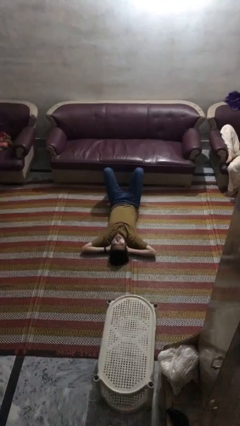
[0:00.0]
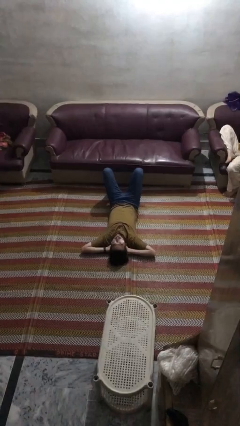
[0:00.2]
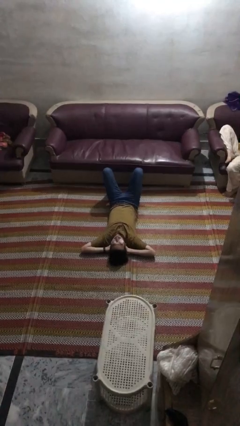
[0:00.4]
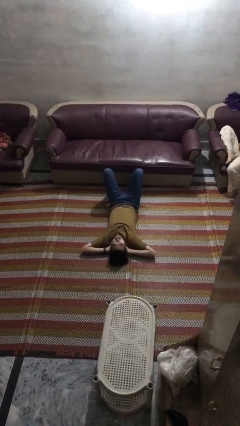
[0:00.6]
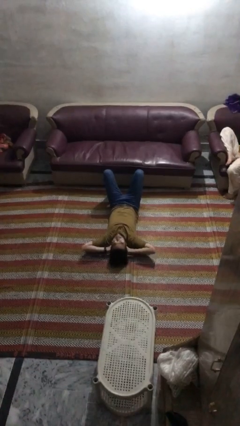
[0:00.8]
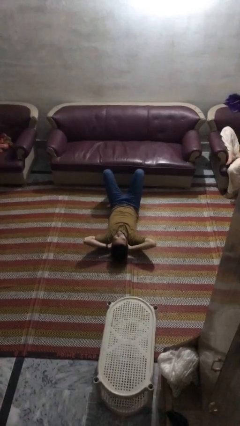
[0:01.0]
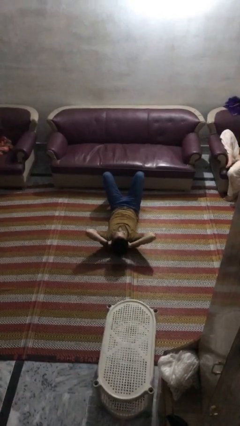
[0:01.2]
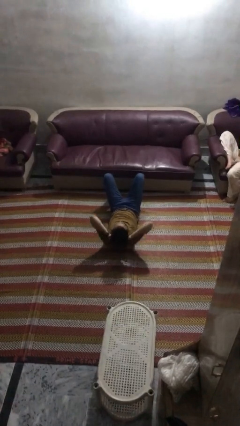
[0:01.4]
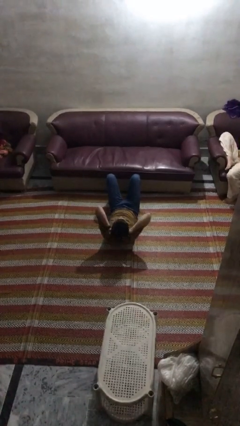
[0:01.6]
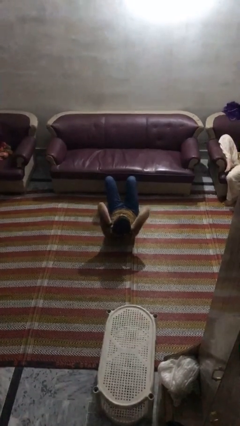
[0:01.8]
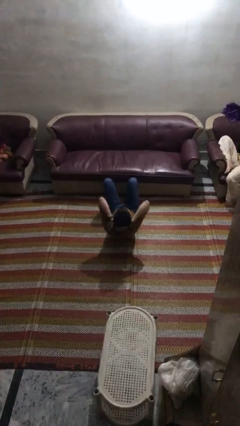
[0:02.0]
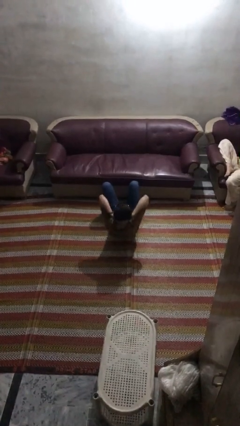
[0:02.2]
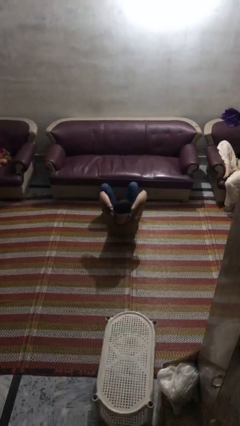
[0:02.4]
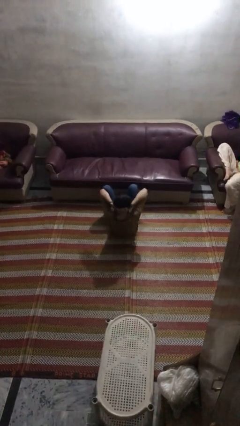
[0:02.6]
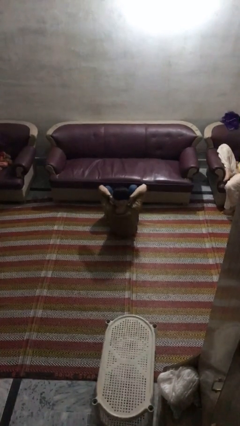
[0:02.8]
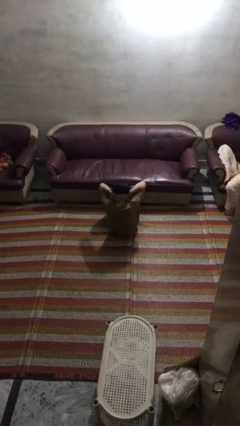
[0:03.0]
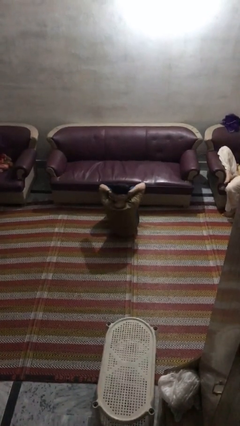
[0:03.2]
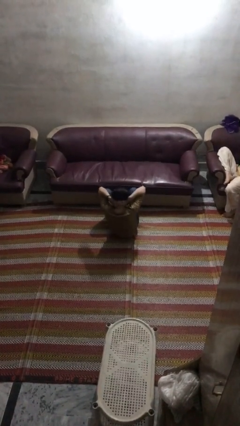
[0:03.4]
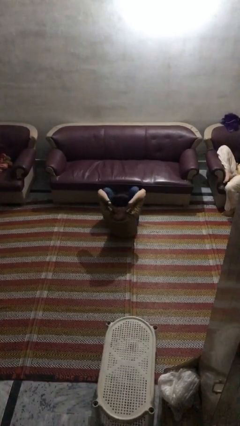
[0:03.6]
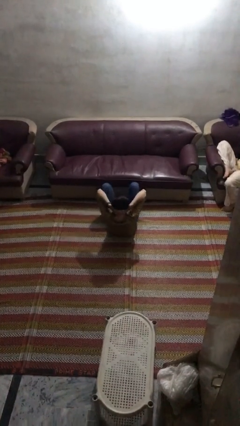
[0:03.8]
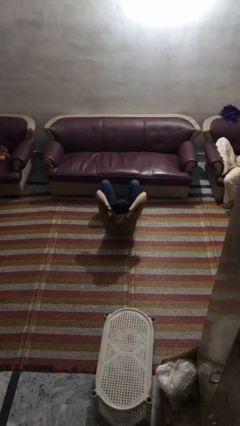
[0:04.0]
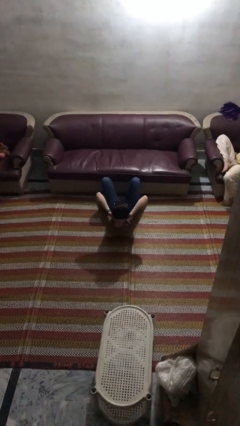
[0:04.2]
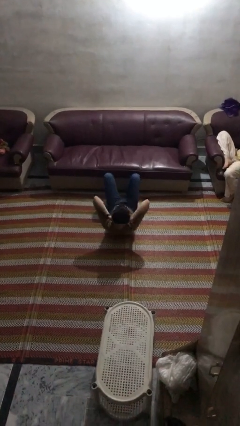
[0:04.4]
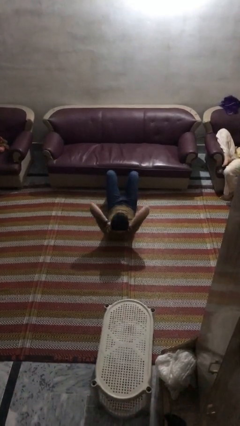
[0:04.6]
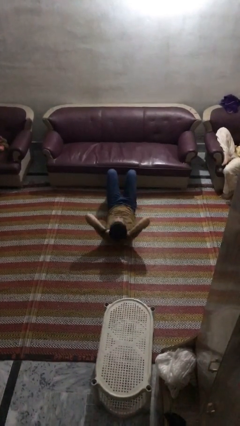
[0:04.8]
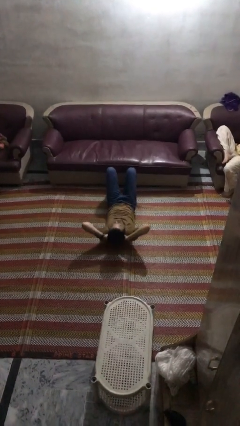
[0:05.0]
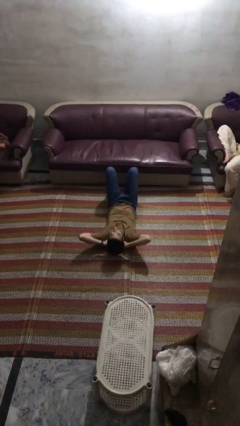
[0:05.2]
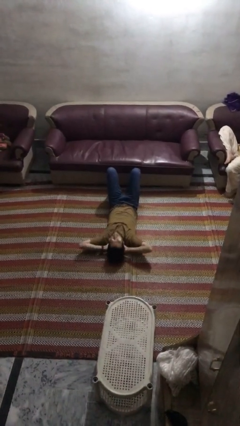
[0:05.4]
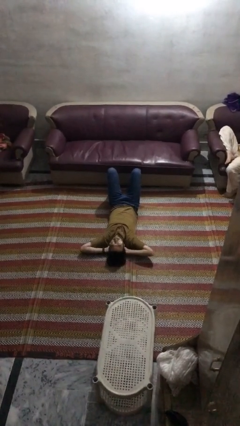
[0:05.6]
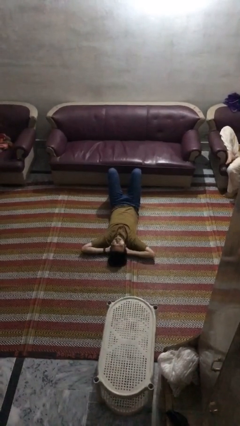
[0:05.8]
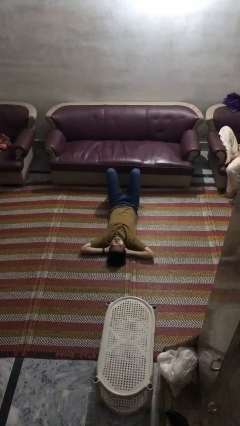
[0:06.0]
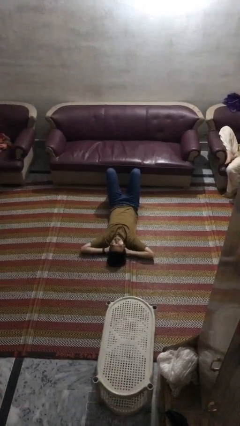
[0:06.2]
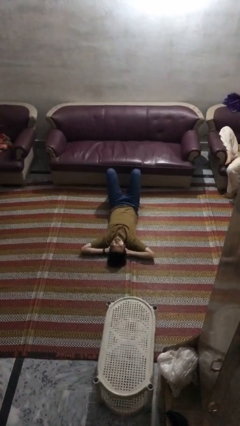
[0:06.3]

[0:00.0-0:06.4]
person exercises with situp

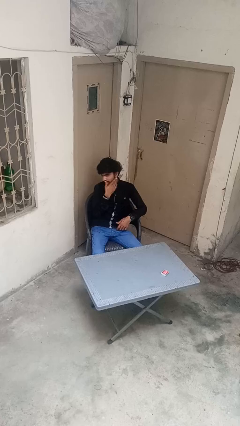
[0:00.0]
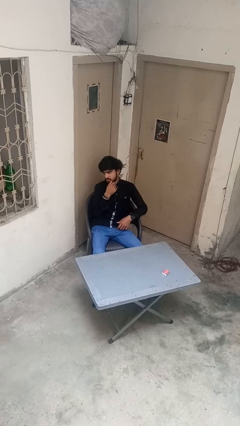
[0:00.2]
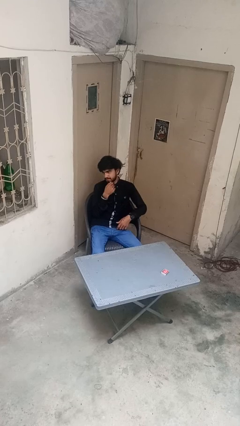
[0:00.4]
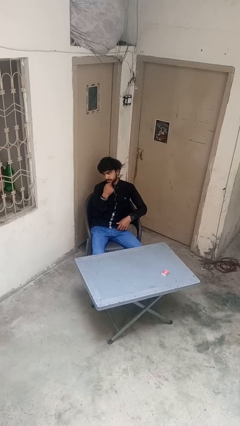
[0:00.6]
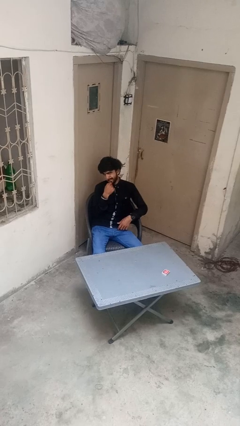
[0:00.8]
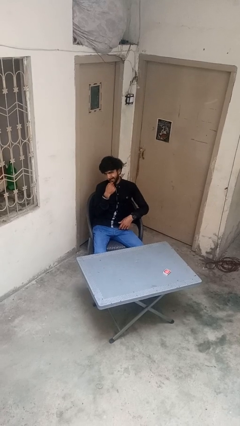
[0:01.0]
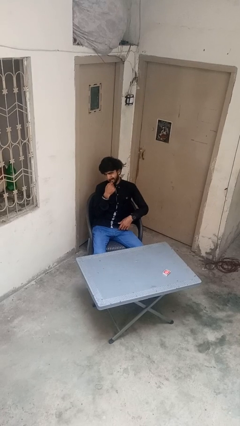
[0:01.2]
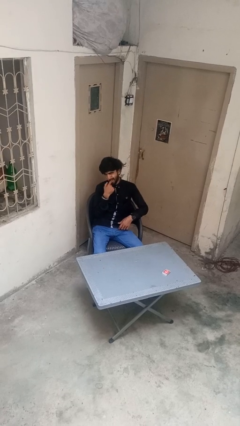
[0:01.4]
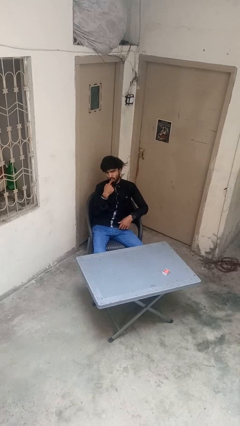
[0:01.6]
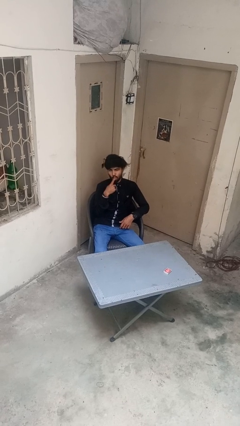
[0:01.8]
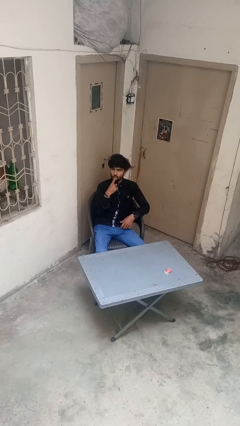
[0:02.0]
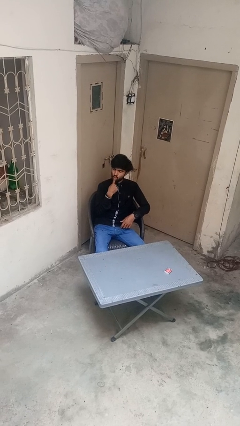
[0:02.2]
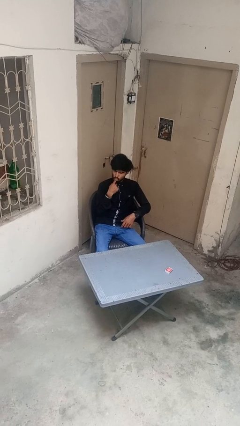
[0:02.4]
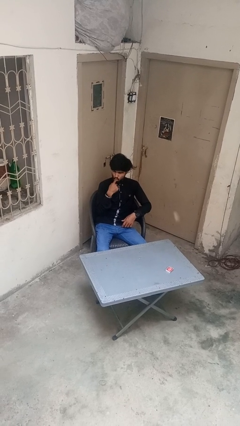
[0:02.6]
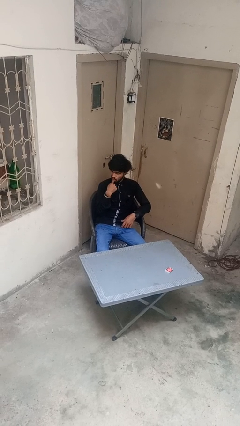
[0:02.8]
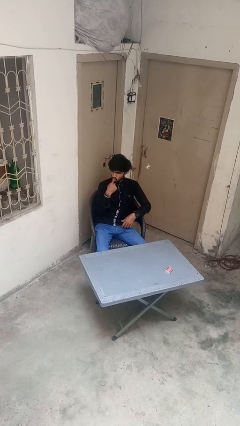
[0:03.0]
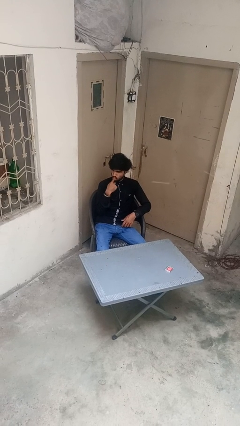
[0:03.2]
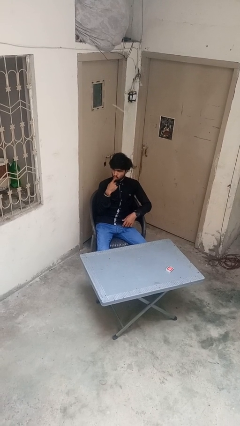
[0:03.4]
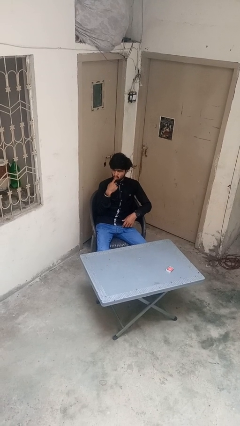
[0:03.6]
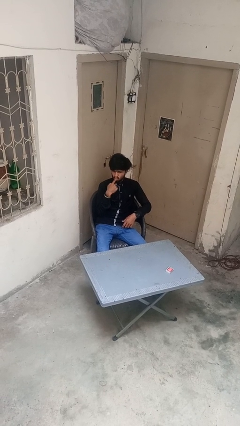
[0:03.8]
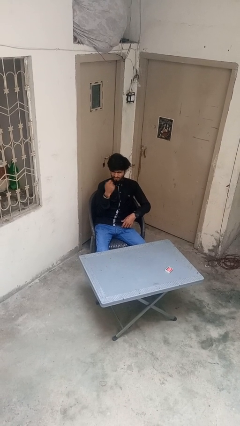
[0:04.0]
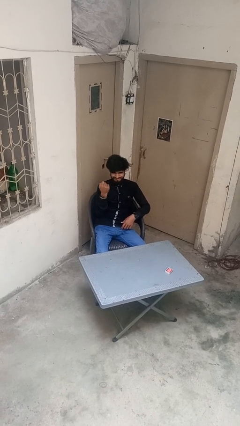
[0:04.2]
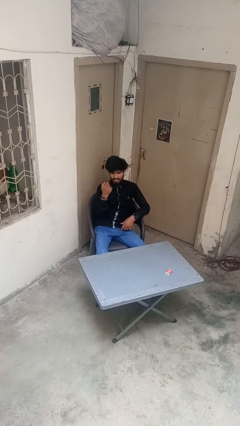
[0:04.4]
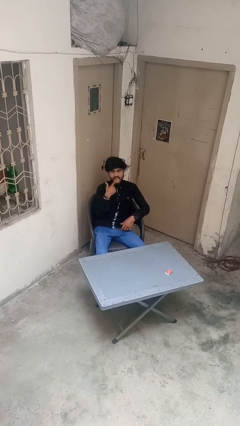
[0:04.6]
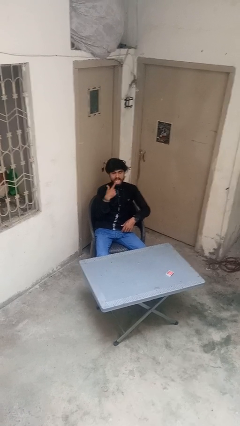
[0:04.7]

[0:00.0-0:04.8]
person licks fingers

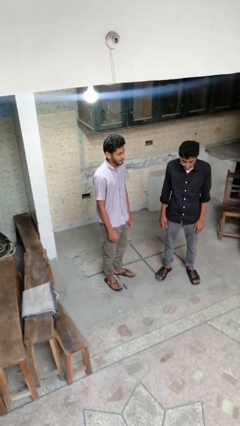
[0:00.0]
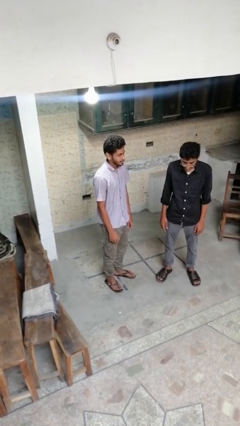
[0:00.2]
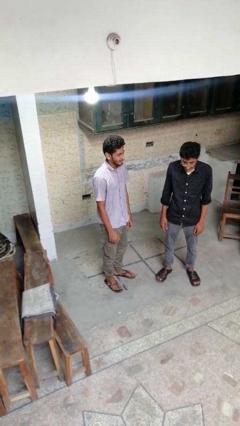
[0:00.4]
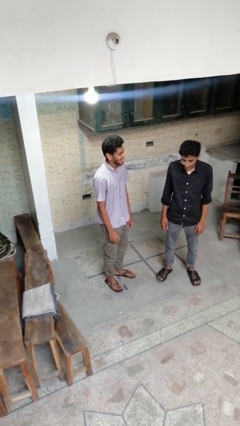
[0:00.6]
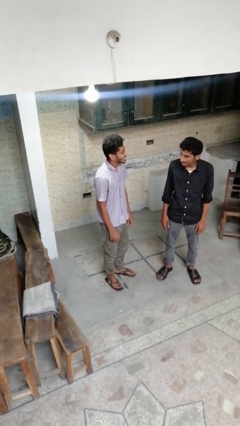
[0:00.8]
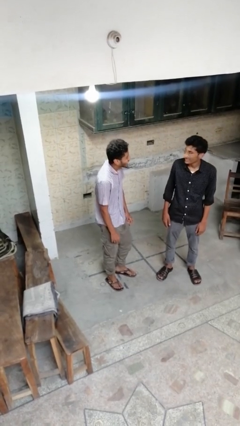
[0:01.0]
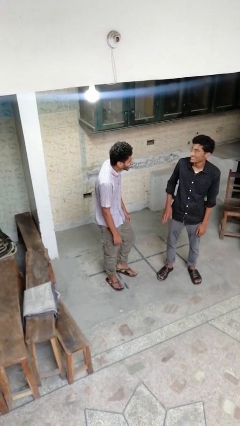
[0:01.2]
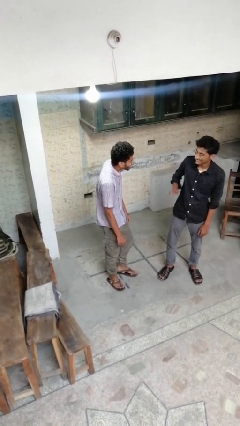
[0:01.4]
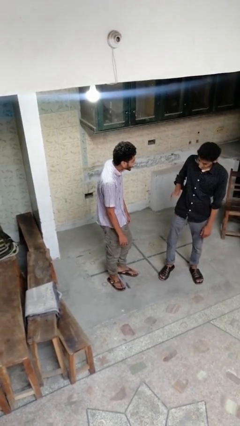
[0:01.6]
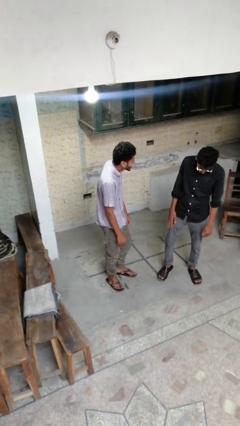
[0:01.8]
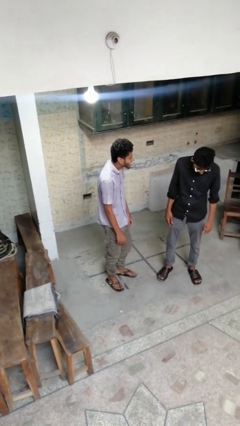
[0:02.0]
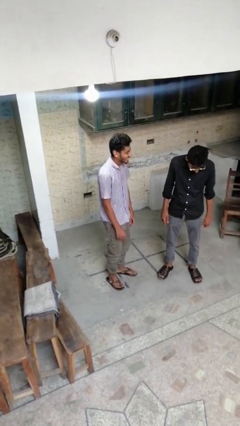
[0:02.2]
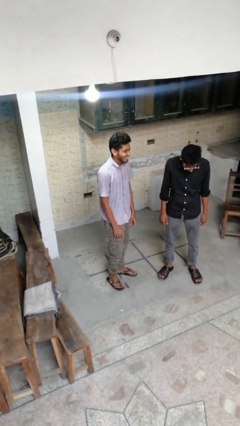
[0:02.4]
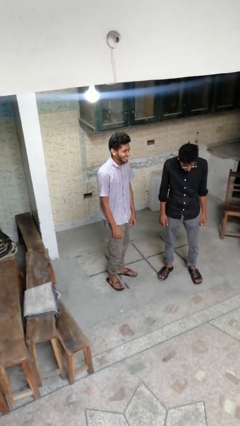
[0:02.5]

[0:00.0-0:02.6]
person laughs with person

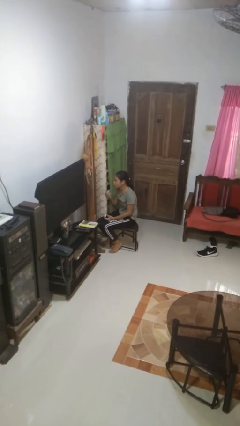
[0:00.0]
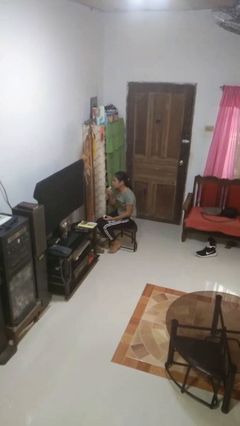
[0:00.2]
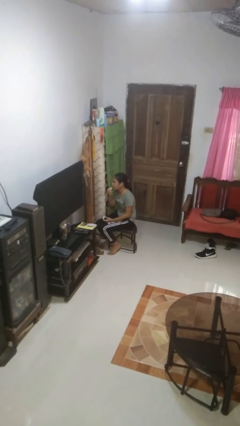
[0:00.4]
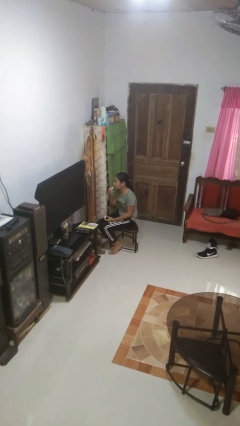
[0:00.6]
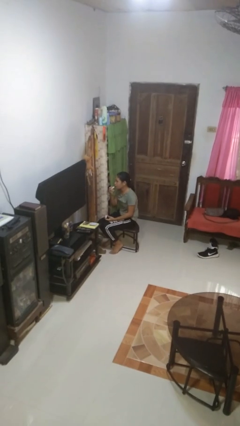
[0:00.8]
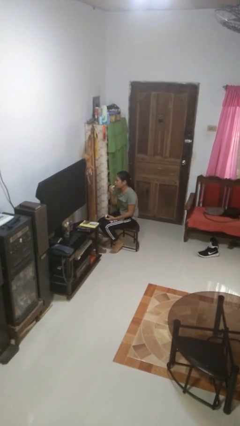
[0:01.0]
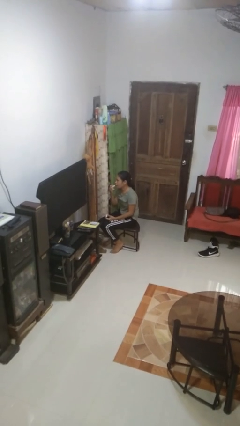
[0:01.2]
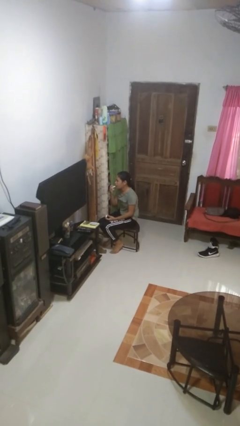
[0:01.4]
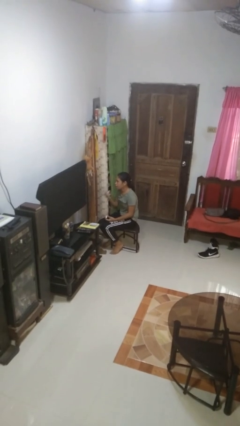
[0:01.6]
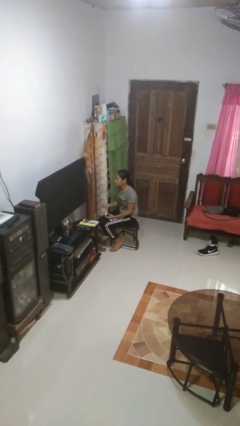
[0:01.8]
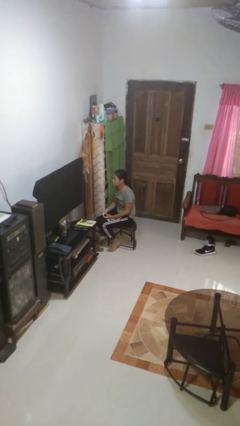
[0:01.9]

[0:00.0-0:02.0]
person applies lip makeup

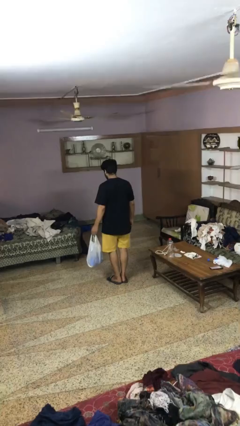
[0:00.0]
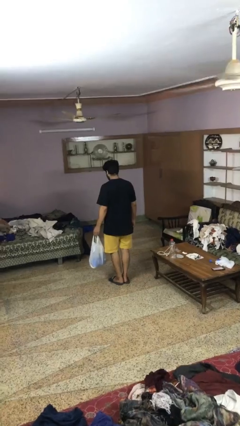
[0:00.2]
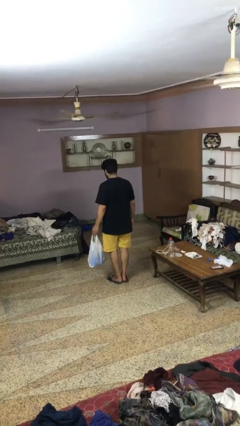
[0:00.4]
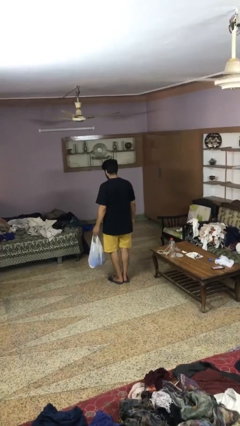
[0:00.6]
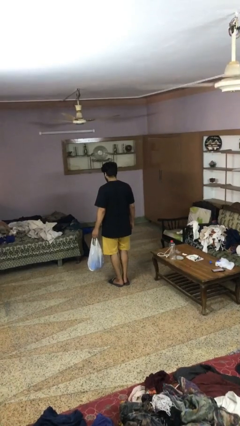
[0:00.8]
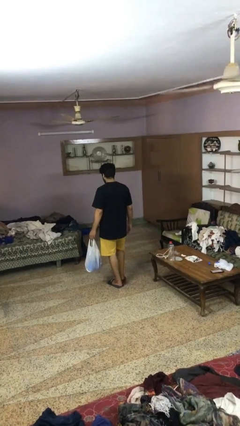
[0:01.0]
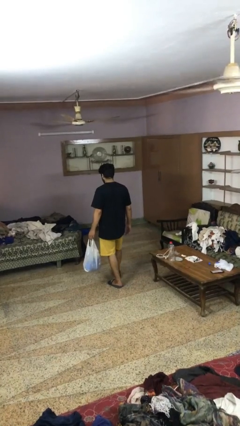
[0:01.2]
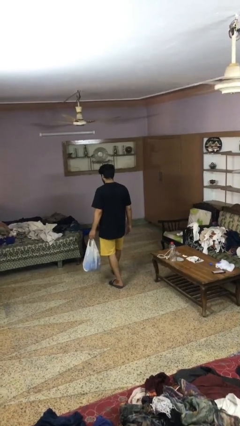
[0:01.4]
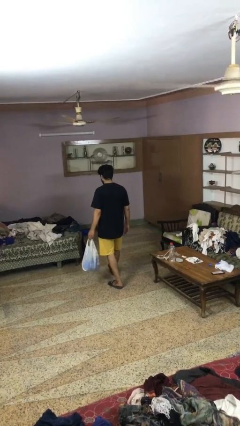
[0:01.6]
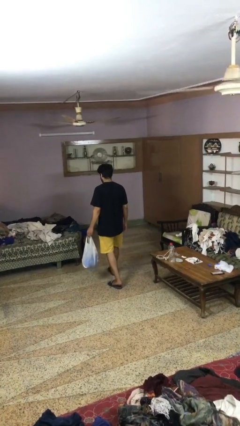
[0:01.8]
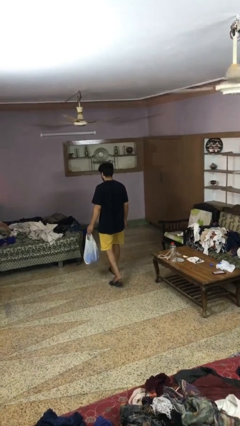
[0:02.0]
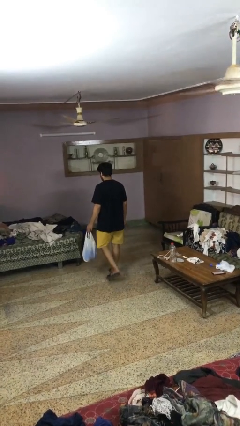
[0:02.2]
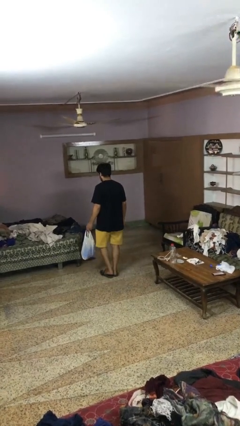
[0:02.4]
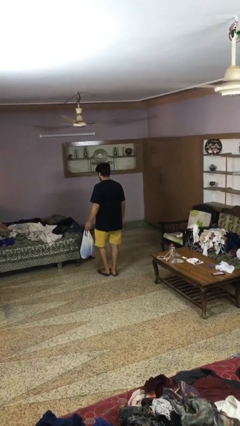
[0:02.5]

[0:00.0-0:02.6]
person carries groceries
